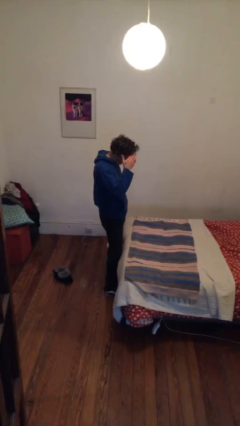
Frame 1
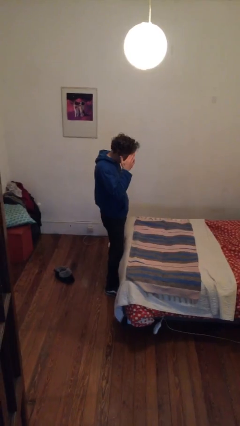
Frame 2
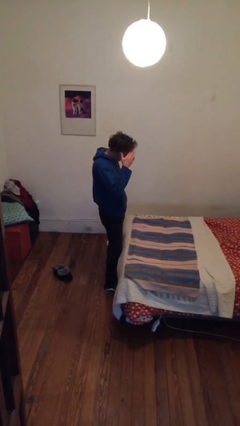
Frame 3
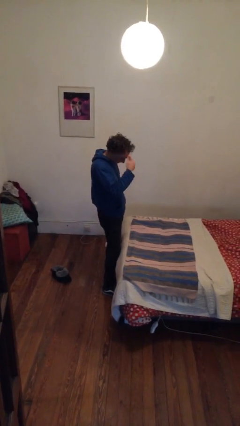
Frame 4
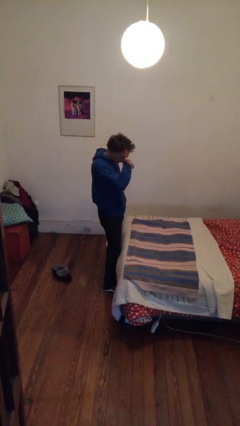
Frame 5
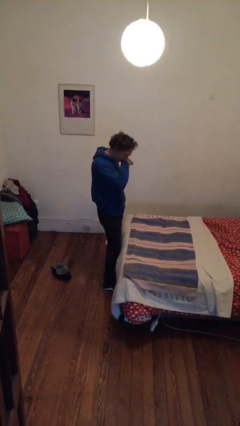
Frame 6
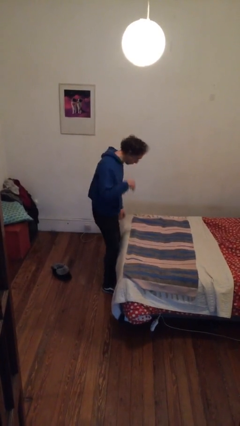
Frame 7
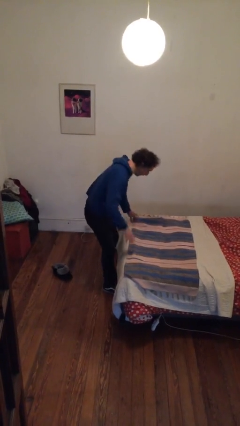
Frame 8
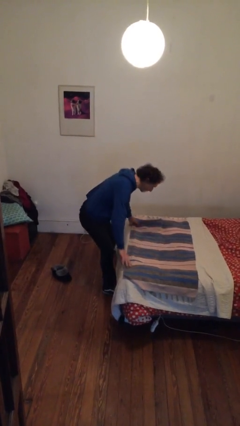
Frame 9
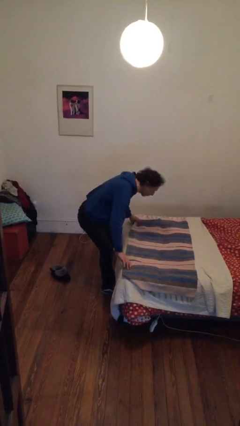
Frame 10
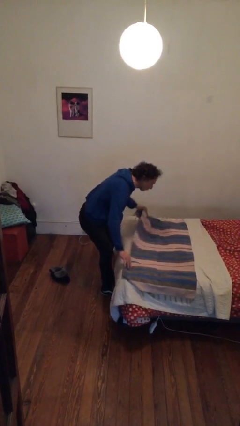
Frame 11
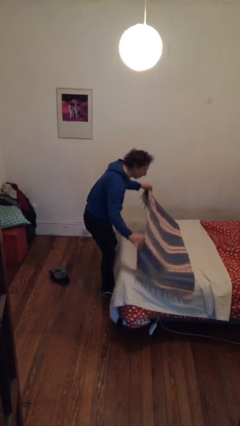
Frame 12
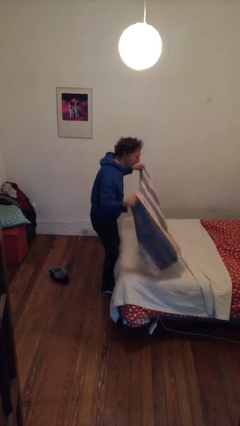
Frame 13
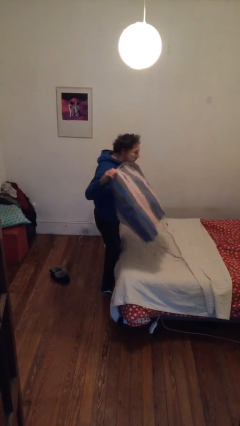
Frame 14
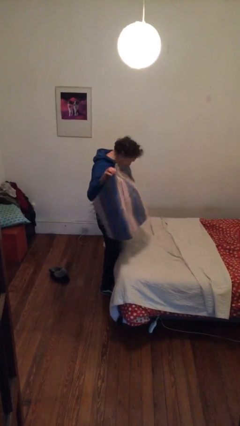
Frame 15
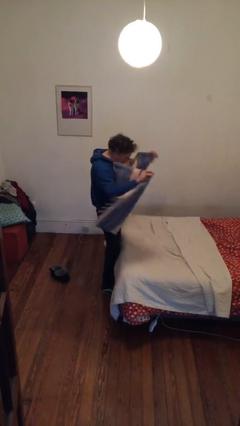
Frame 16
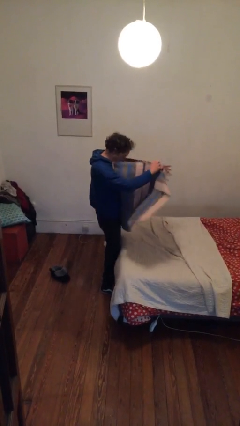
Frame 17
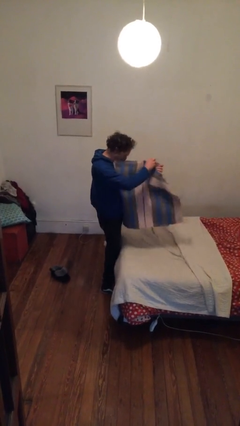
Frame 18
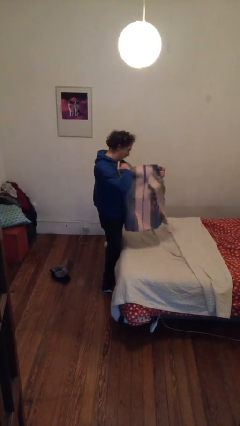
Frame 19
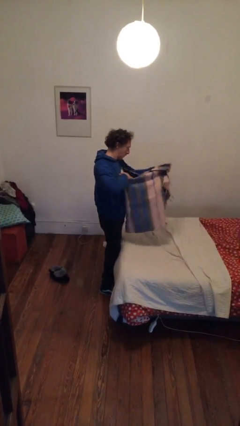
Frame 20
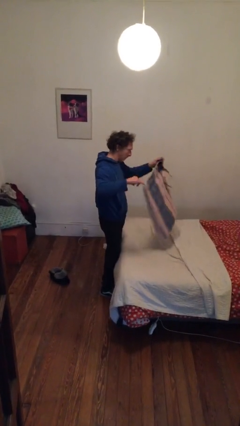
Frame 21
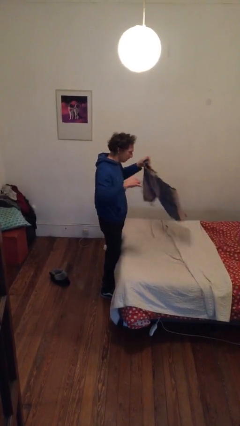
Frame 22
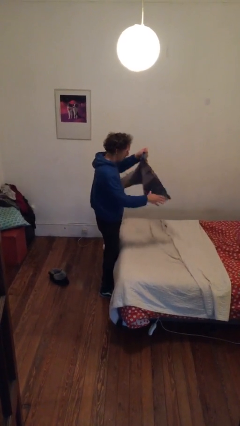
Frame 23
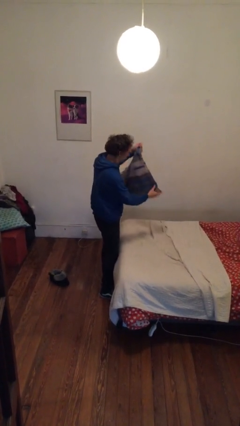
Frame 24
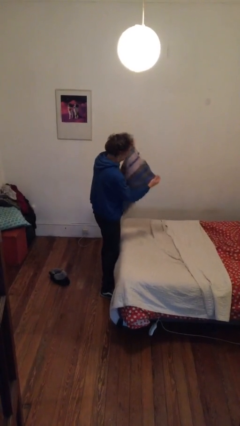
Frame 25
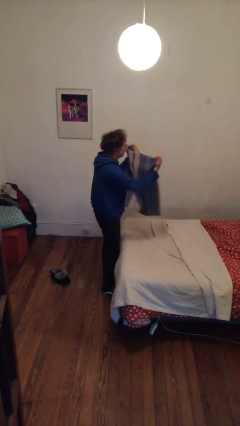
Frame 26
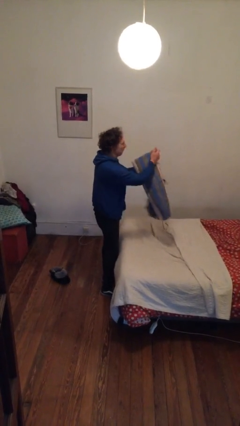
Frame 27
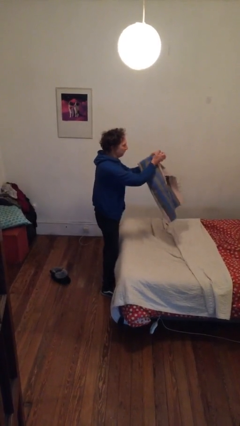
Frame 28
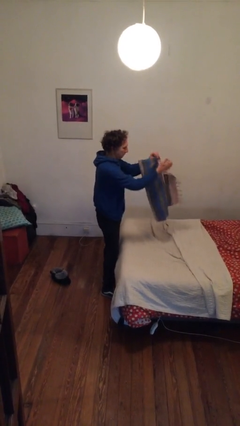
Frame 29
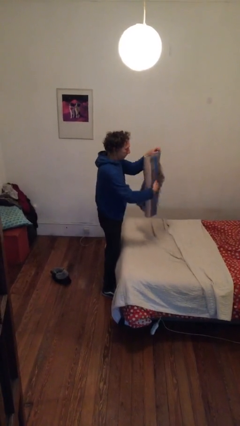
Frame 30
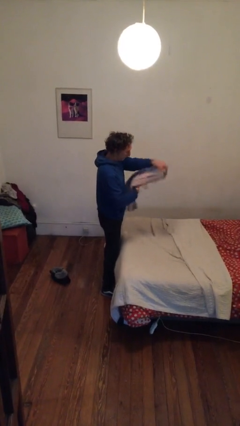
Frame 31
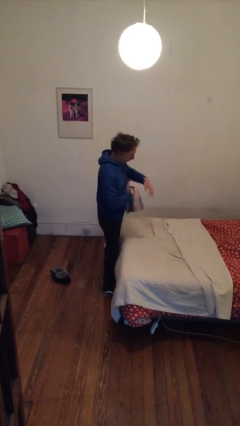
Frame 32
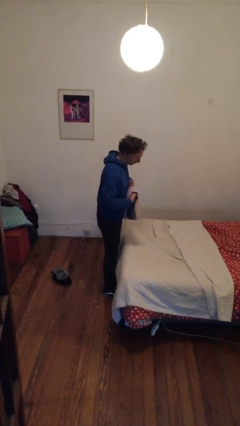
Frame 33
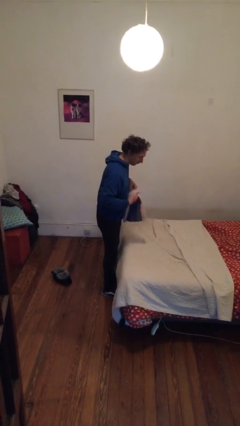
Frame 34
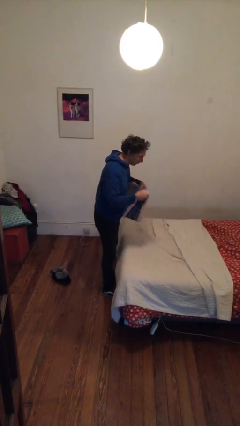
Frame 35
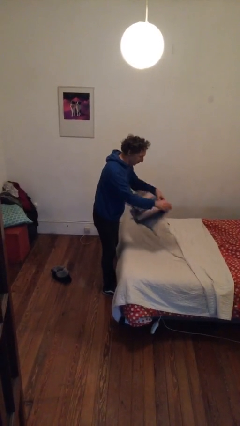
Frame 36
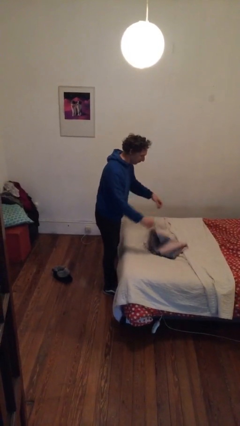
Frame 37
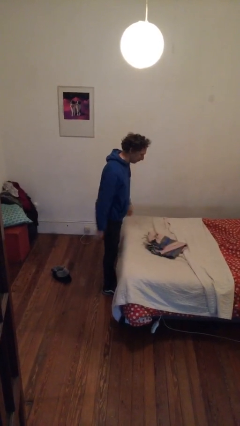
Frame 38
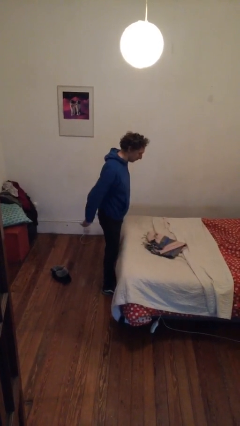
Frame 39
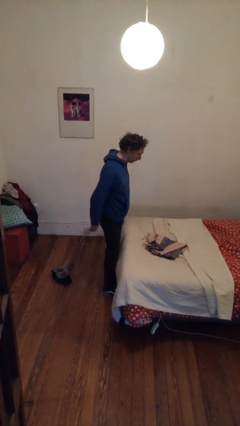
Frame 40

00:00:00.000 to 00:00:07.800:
person folds blanket

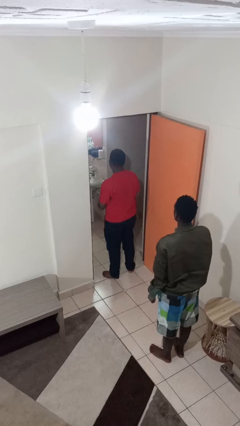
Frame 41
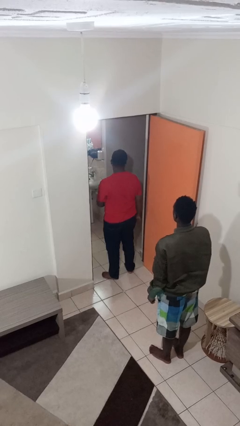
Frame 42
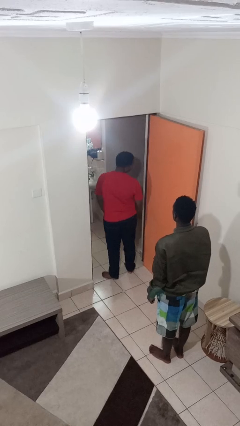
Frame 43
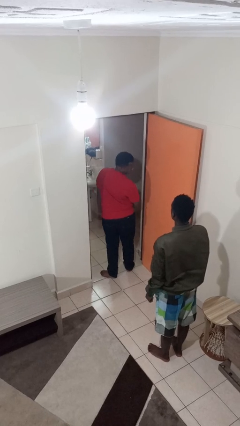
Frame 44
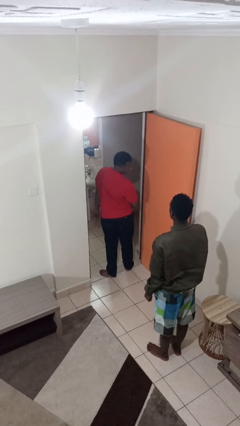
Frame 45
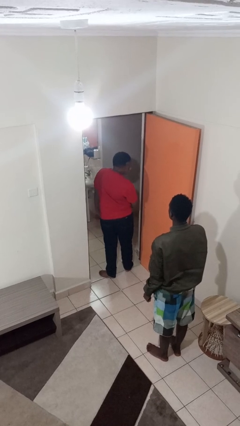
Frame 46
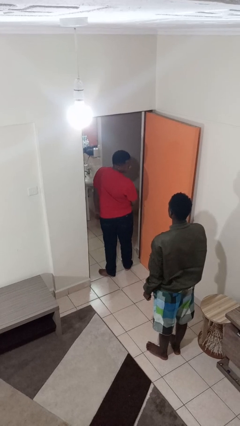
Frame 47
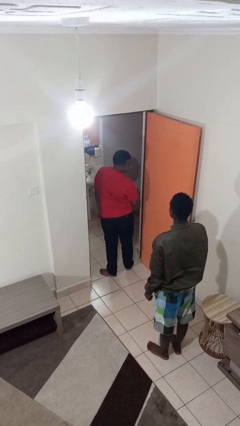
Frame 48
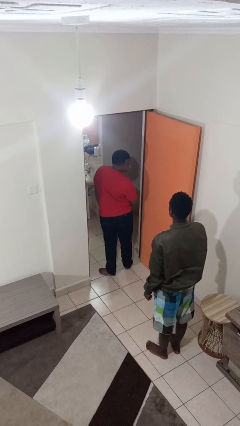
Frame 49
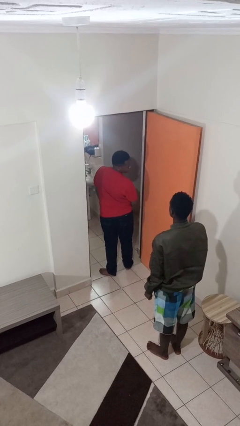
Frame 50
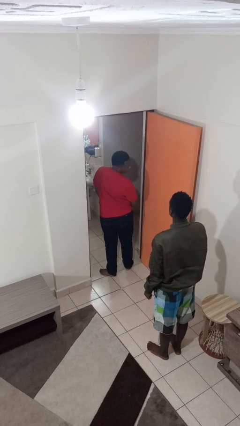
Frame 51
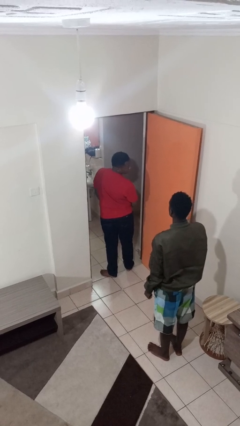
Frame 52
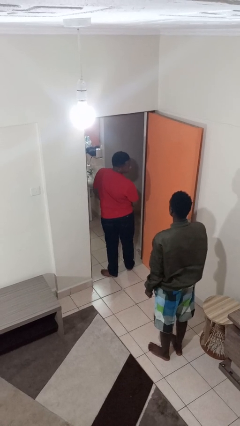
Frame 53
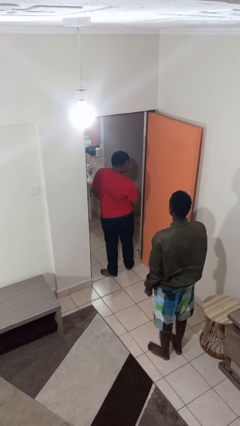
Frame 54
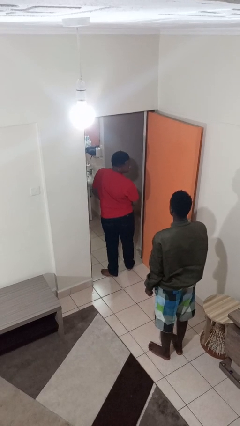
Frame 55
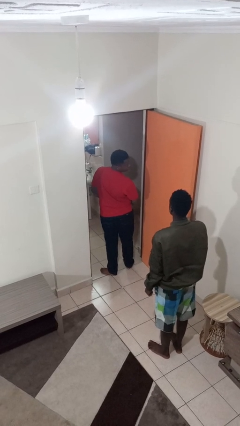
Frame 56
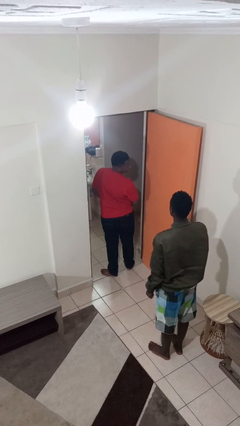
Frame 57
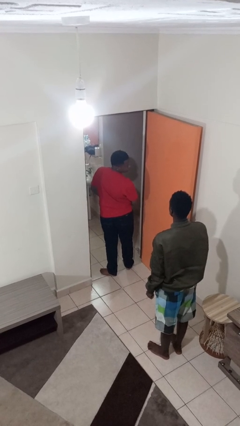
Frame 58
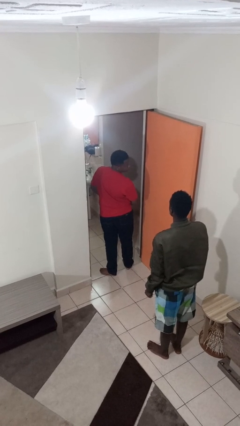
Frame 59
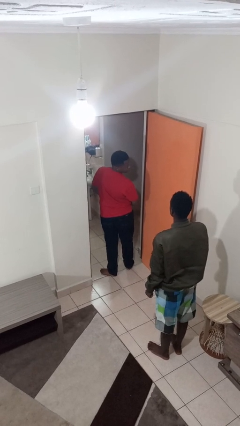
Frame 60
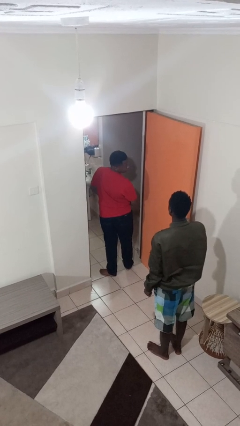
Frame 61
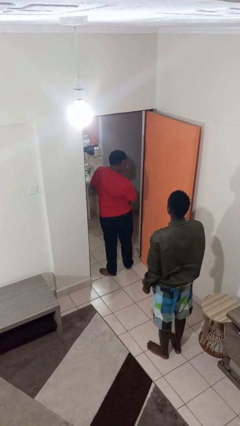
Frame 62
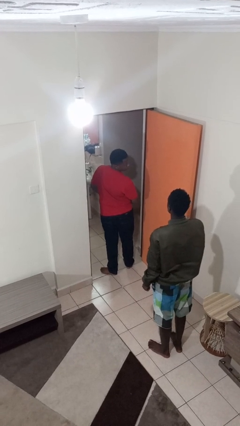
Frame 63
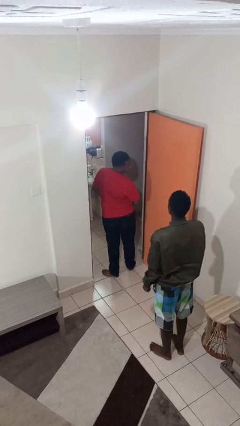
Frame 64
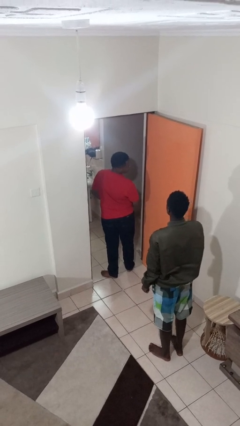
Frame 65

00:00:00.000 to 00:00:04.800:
person looks over shoulder

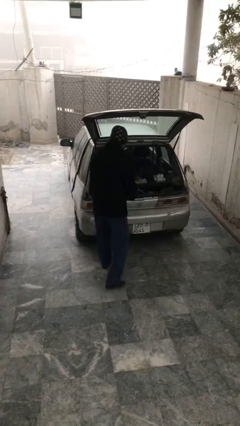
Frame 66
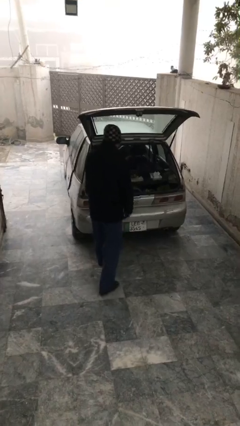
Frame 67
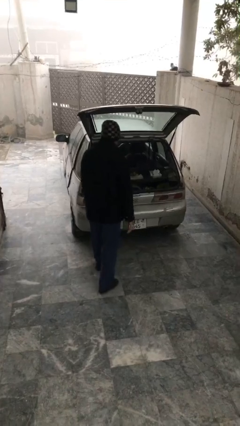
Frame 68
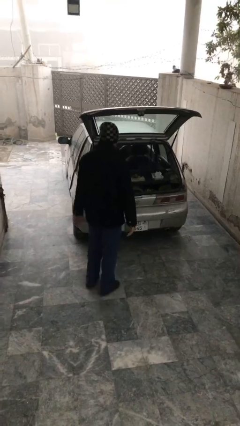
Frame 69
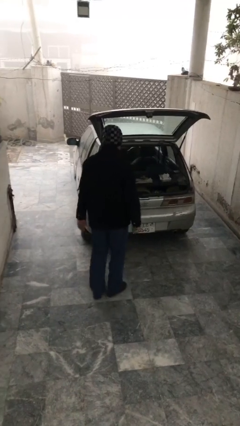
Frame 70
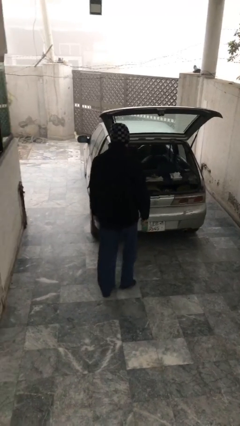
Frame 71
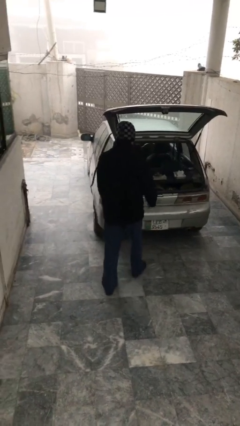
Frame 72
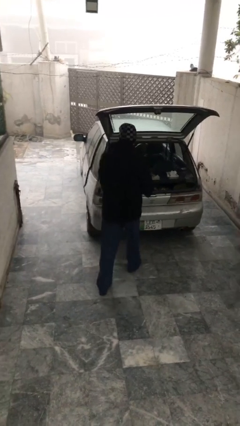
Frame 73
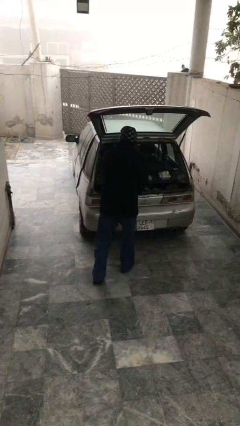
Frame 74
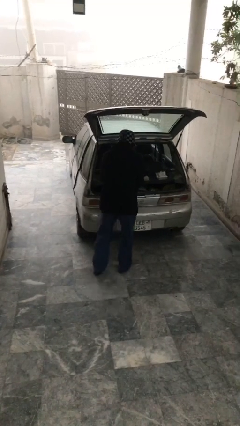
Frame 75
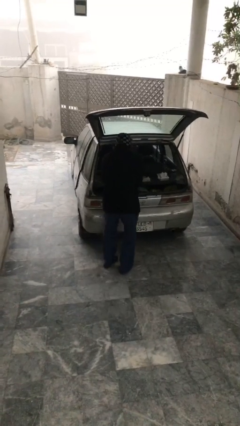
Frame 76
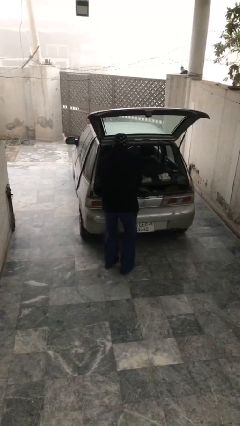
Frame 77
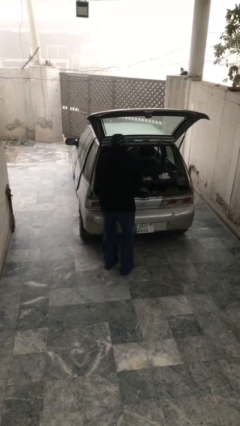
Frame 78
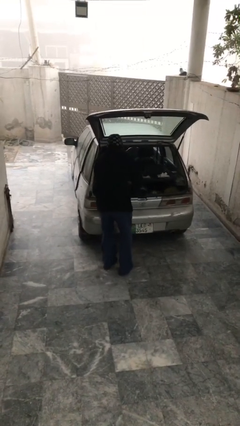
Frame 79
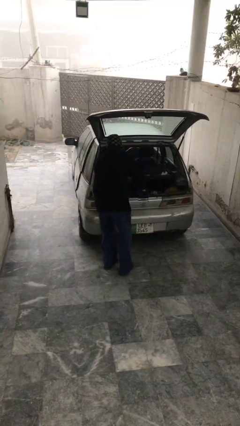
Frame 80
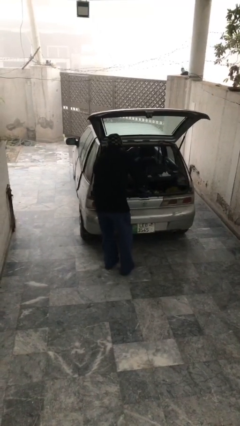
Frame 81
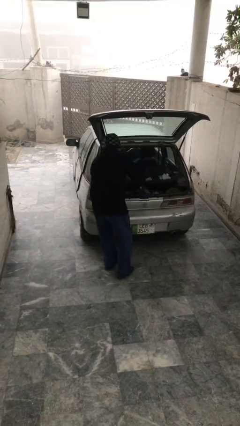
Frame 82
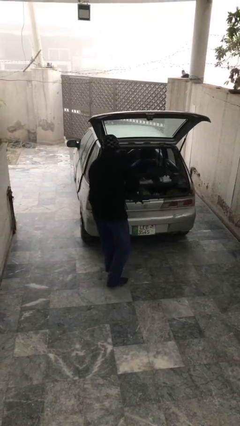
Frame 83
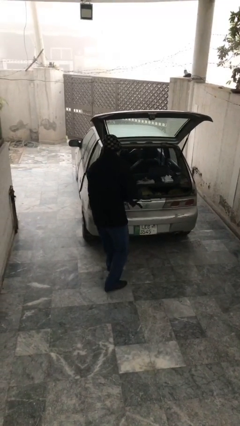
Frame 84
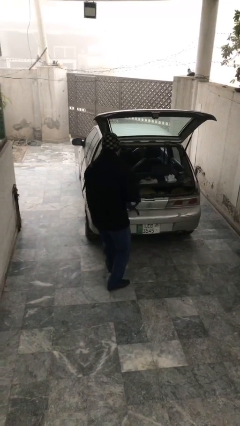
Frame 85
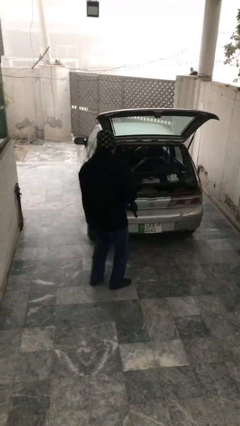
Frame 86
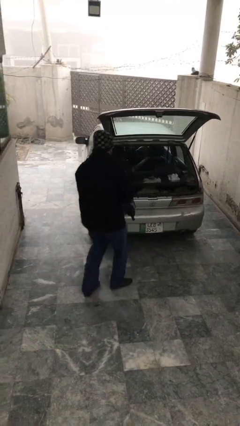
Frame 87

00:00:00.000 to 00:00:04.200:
person unloads car

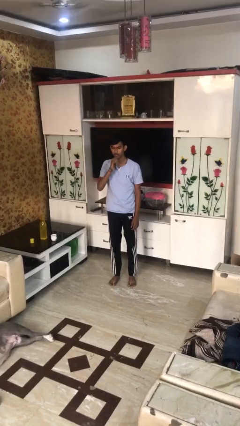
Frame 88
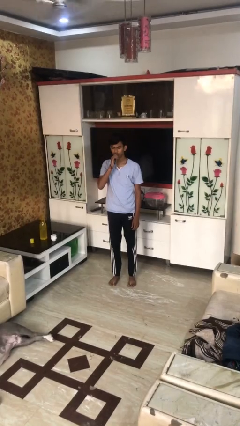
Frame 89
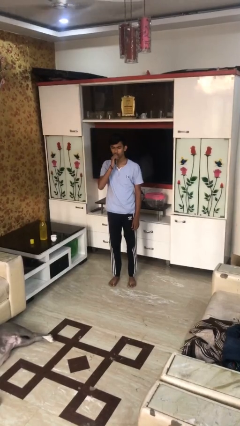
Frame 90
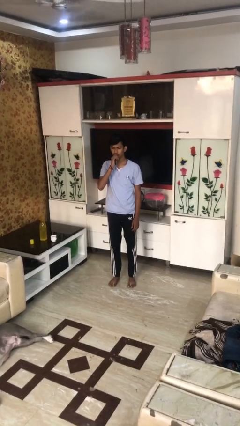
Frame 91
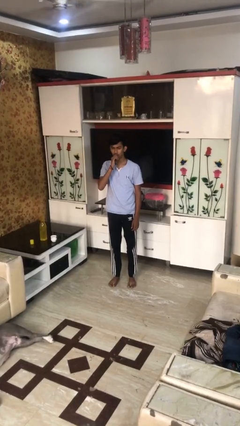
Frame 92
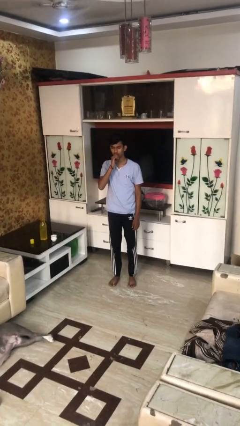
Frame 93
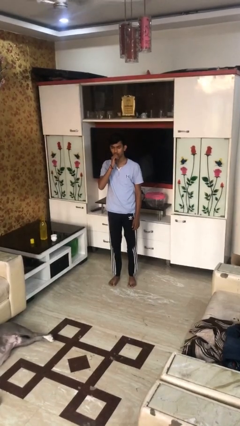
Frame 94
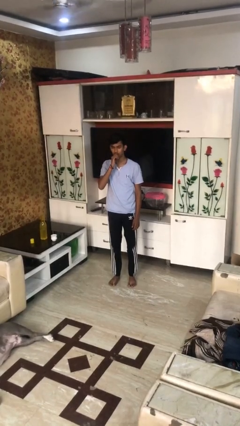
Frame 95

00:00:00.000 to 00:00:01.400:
person vapes
